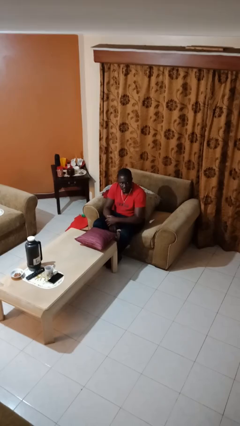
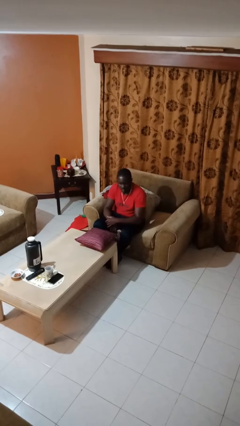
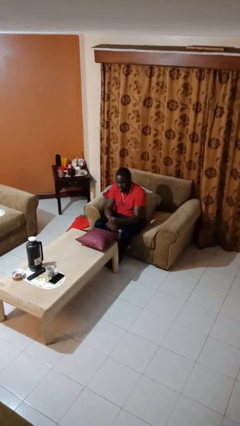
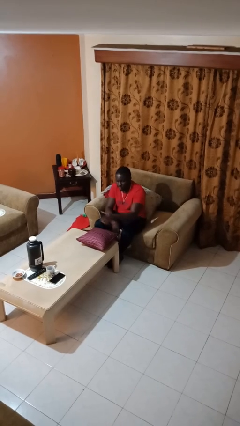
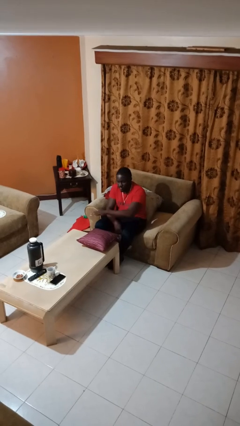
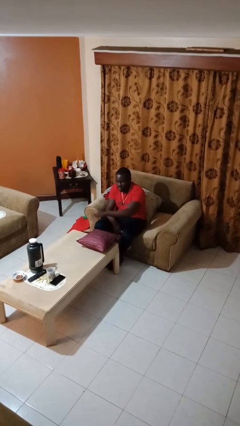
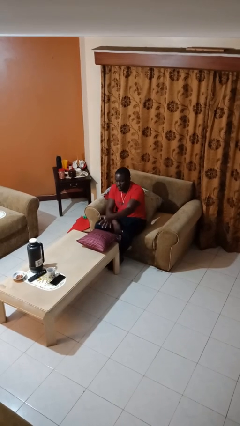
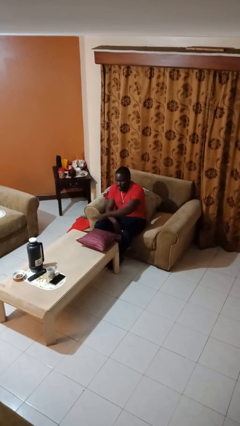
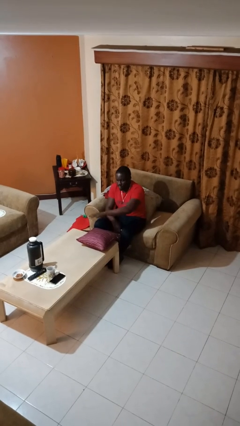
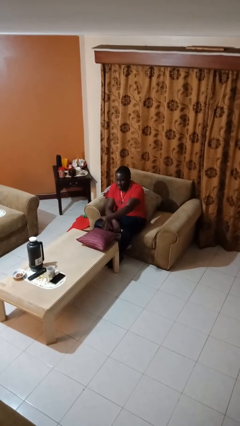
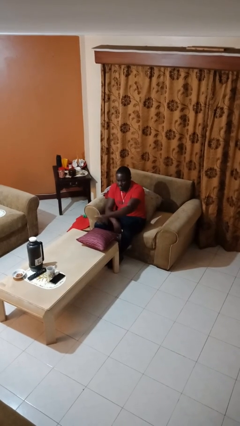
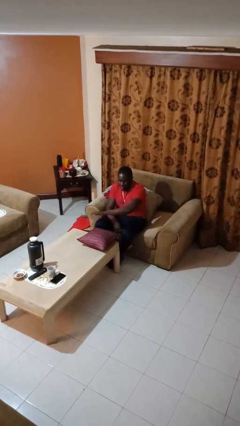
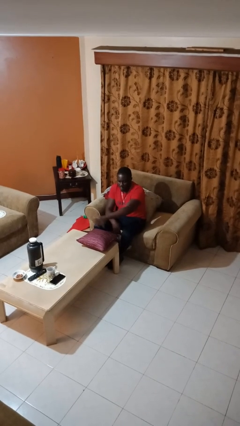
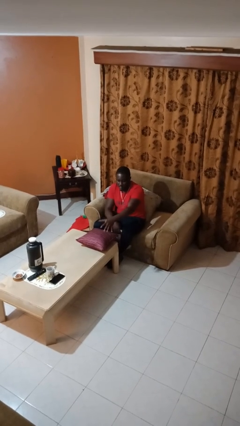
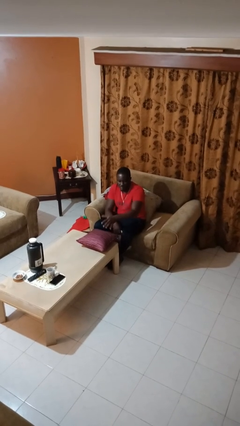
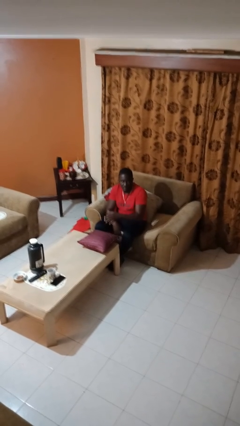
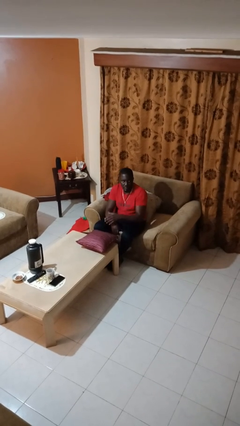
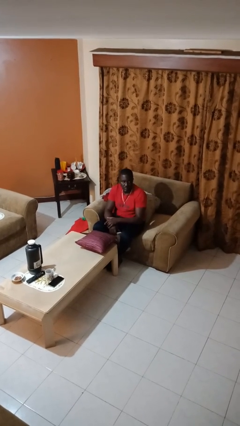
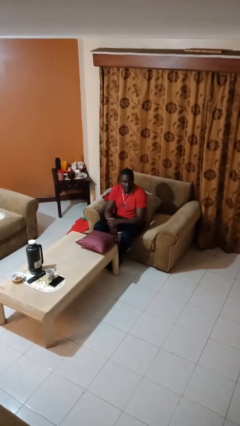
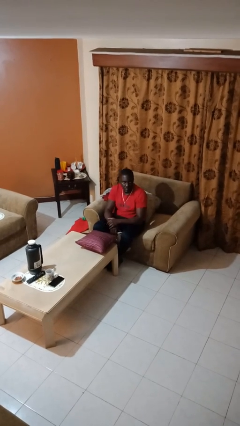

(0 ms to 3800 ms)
person waves hand over object

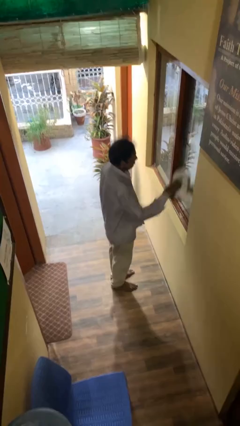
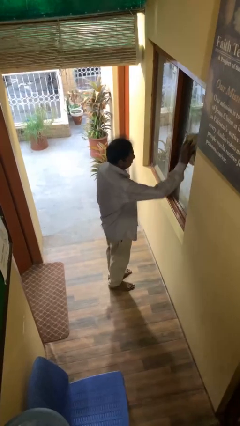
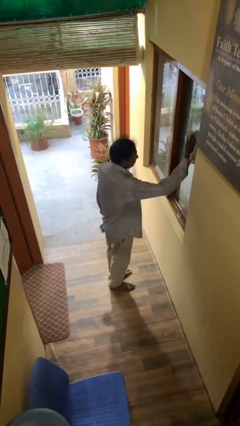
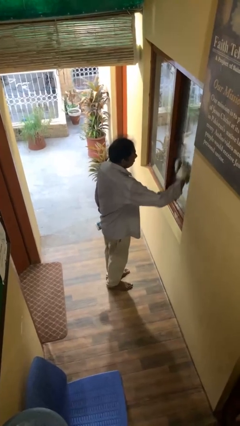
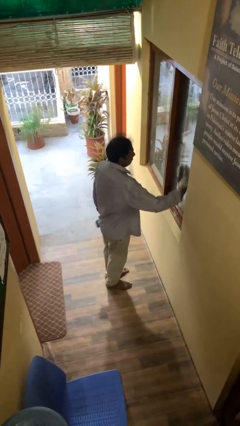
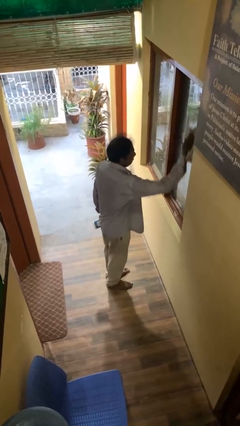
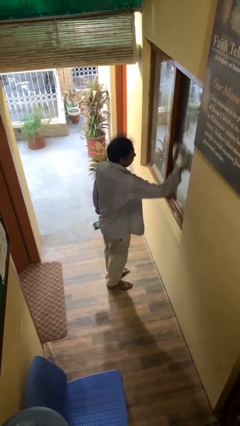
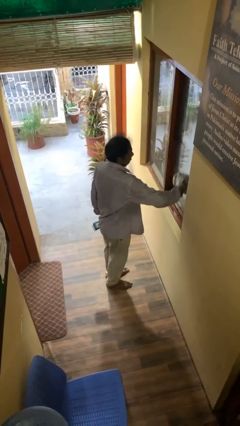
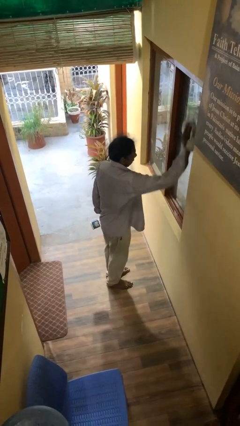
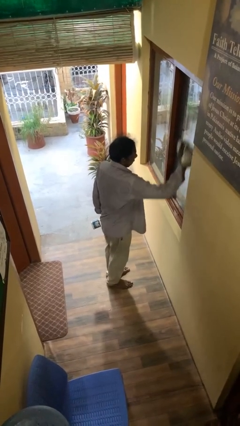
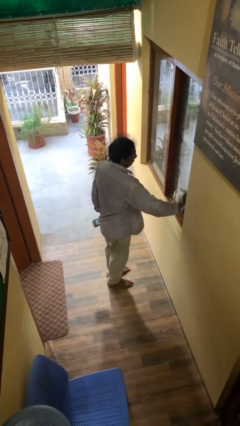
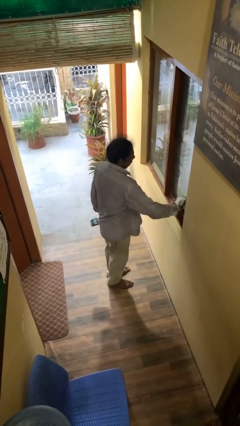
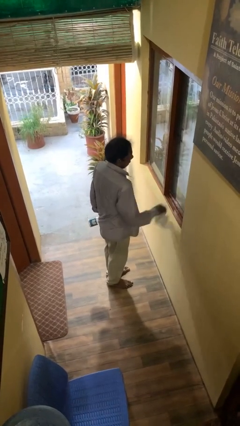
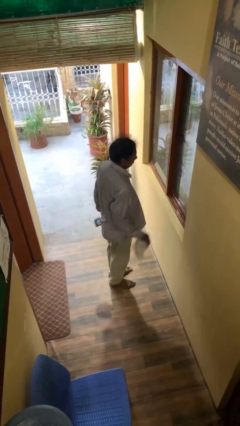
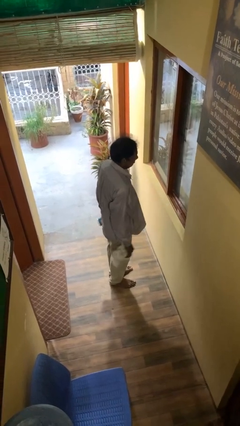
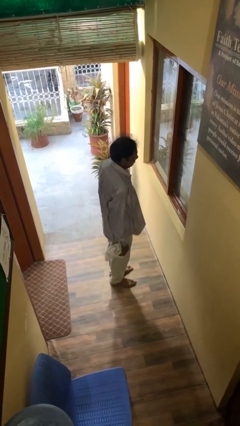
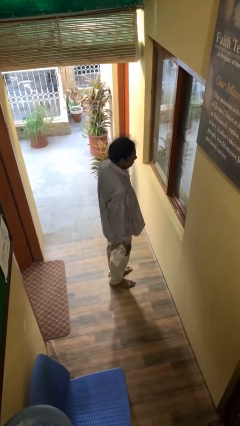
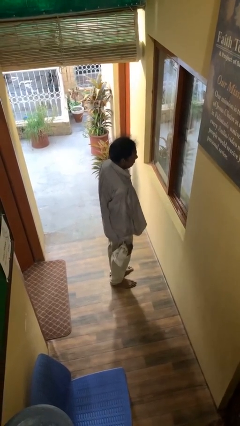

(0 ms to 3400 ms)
person washes window

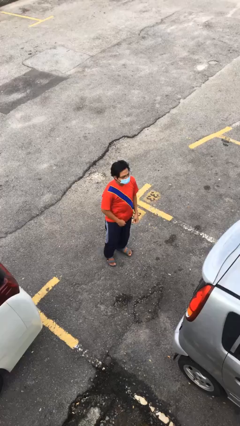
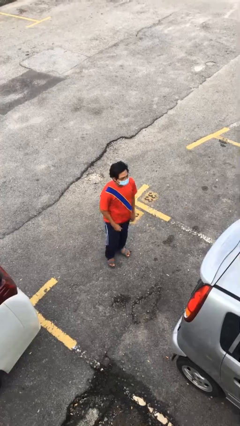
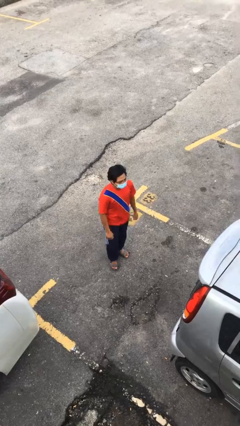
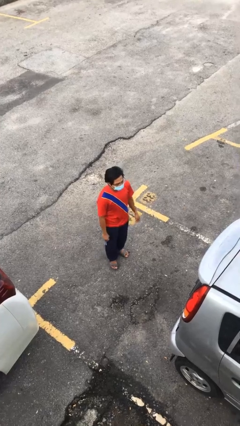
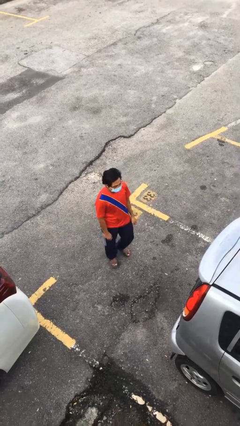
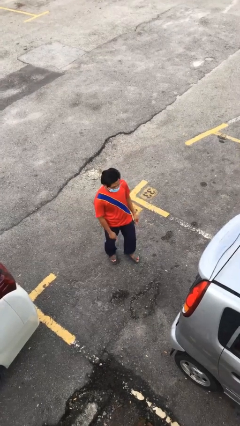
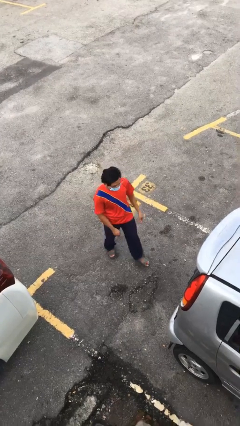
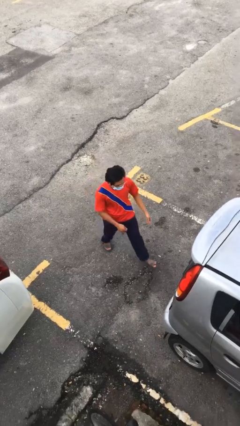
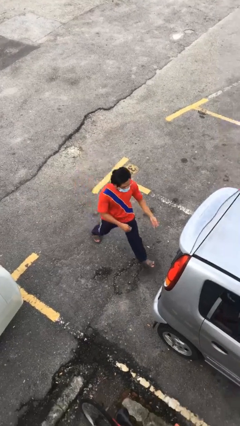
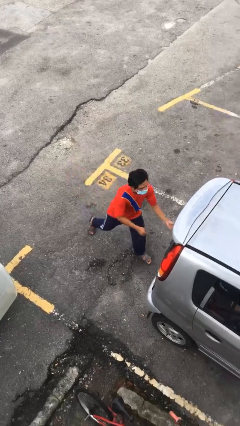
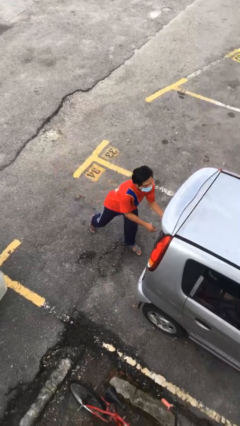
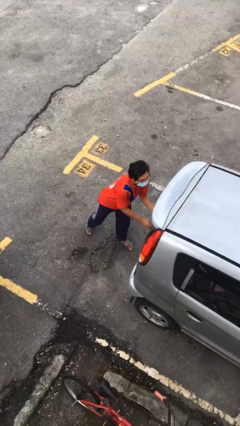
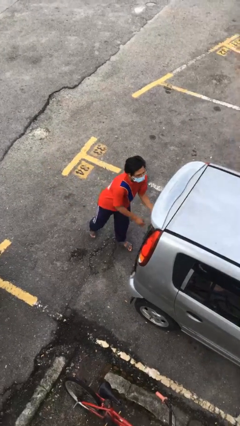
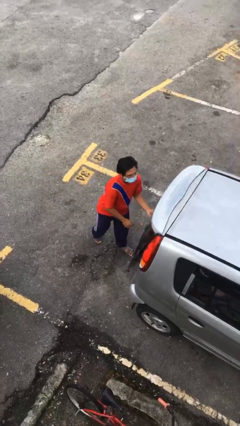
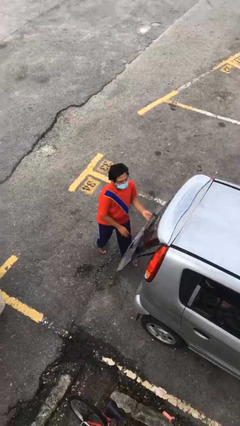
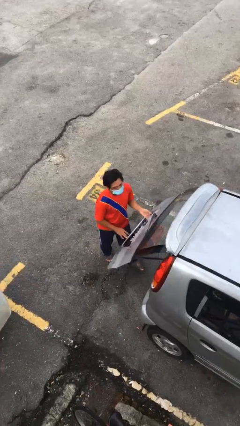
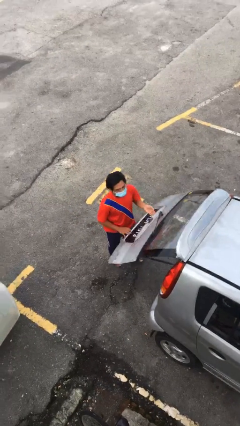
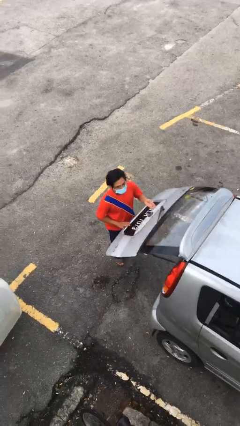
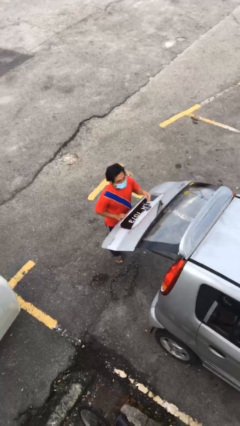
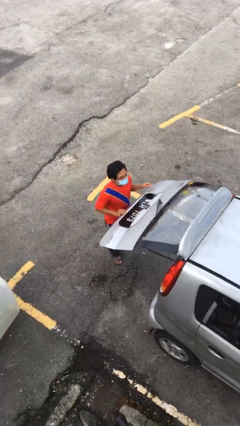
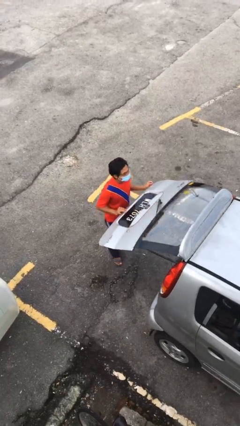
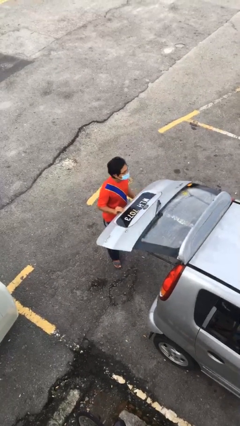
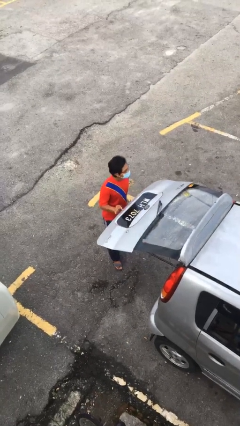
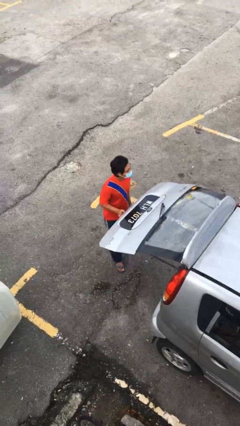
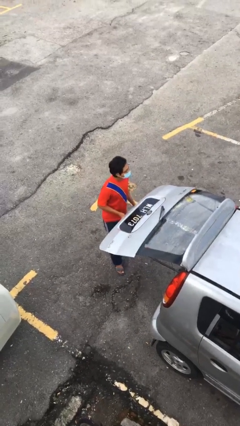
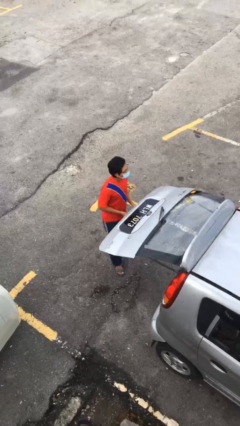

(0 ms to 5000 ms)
person opens car trunk

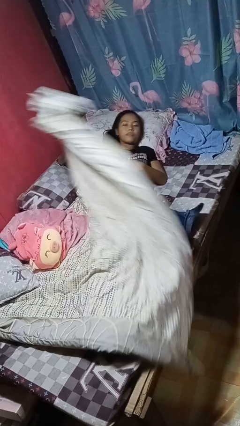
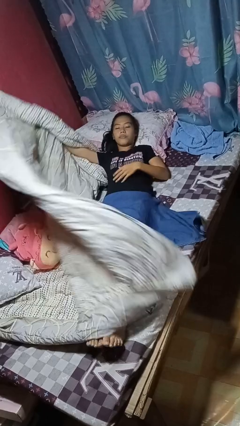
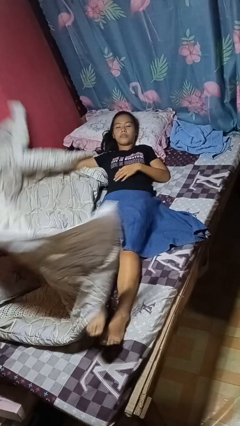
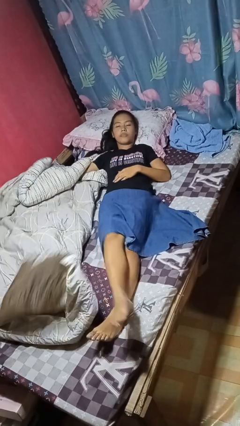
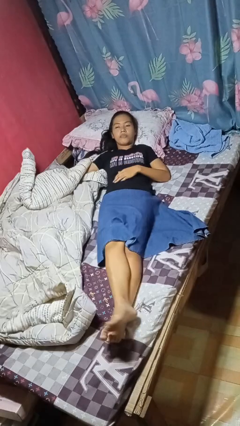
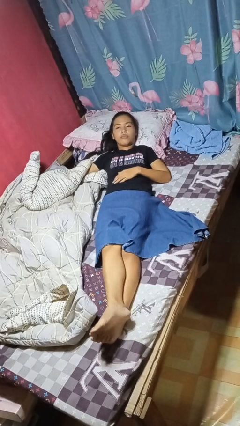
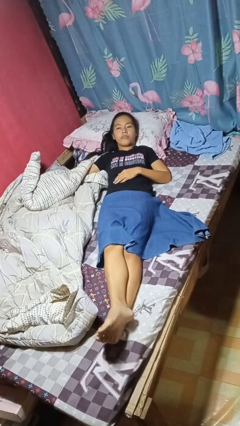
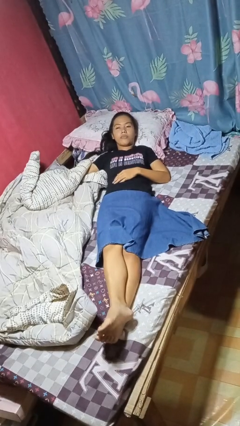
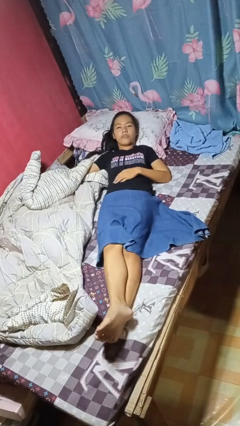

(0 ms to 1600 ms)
person uncovers with bedsheets

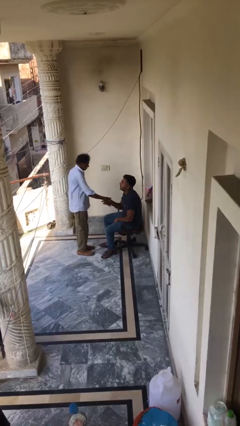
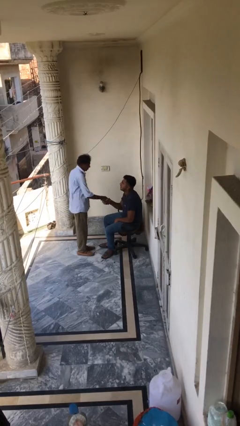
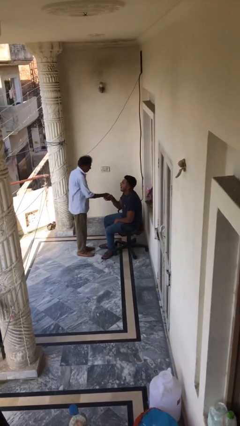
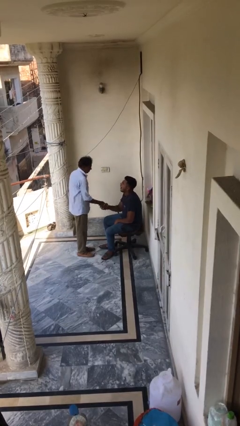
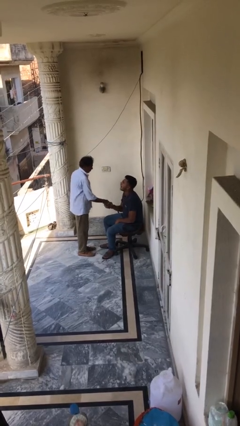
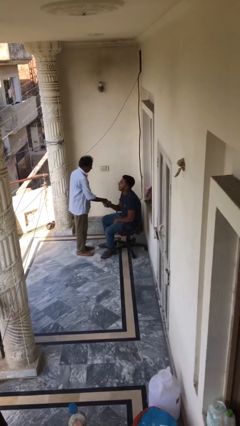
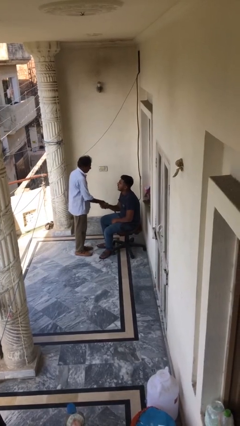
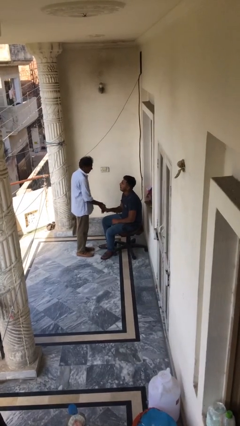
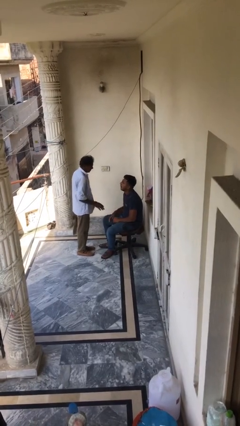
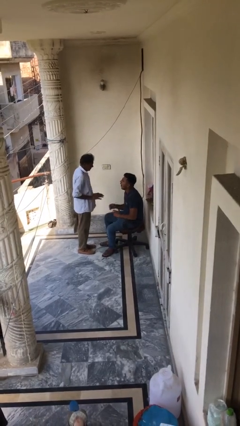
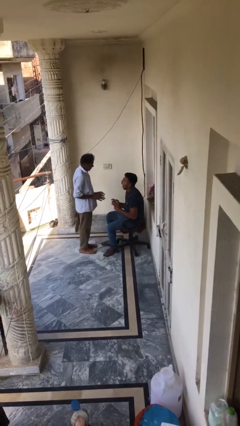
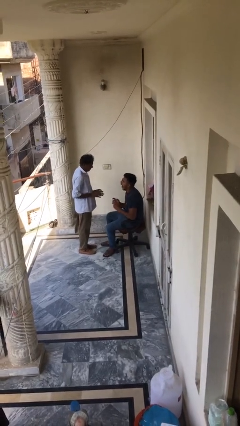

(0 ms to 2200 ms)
person shakes hand

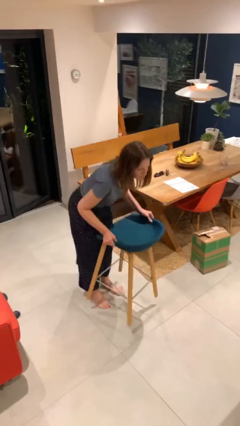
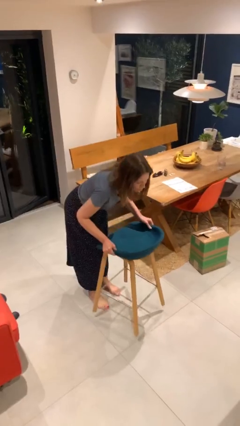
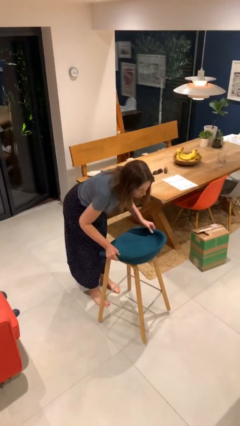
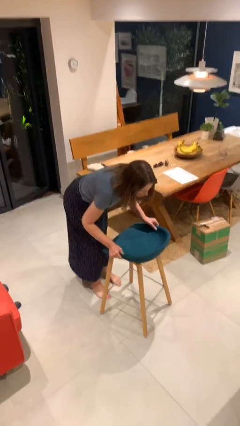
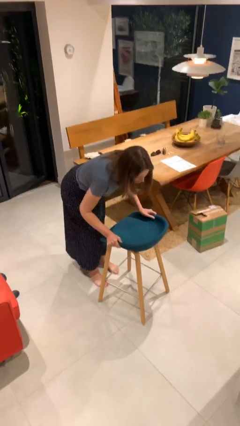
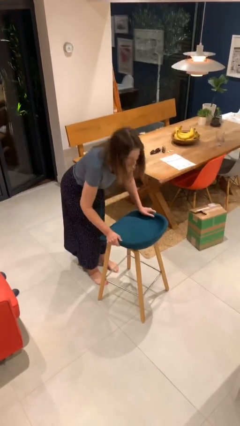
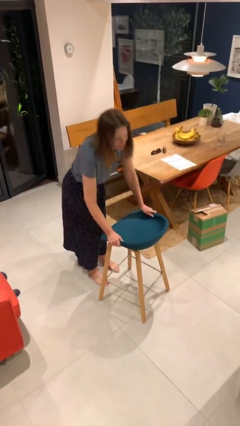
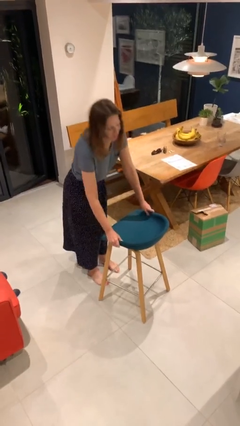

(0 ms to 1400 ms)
person puts down object on floor
